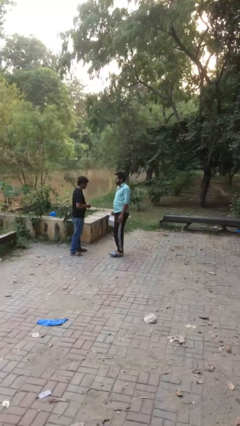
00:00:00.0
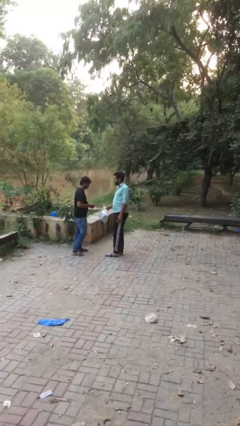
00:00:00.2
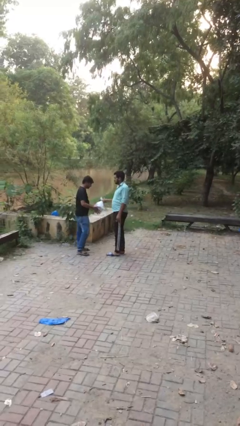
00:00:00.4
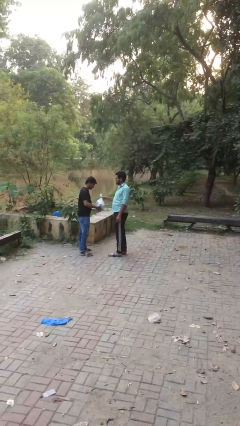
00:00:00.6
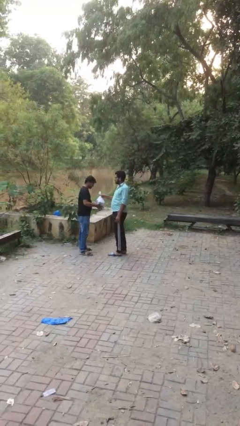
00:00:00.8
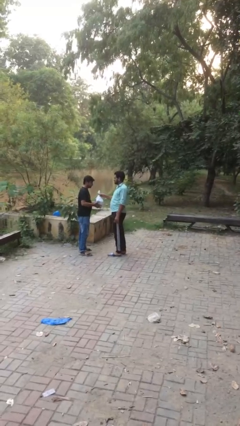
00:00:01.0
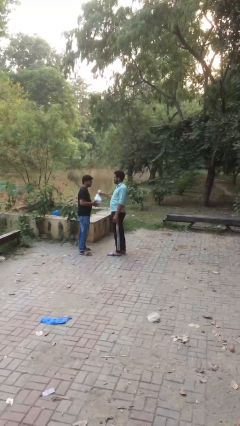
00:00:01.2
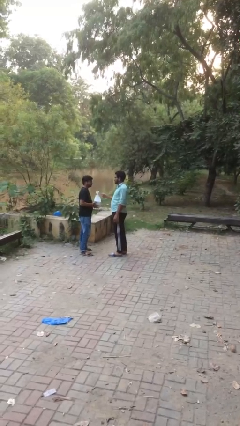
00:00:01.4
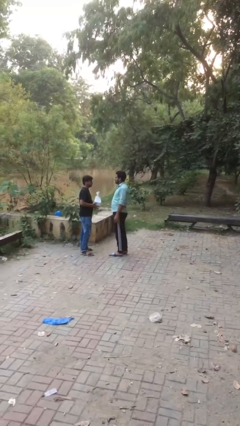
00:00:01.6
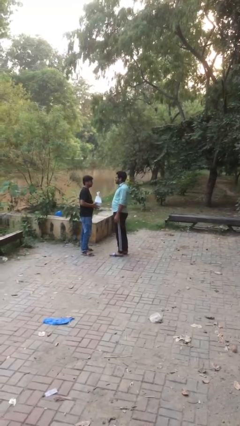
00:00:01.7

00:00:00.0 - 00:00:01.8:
person transfers object to person

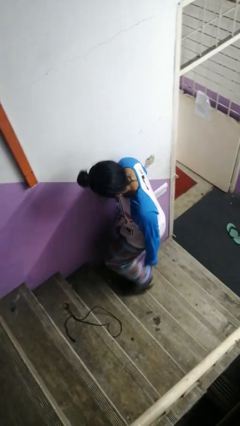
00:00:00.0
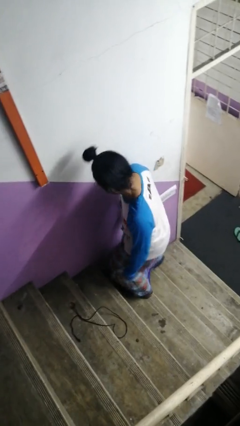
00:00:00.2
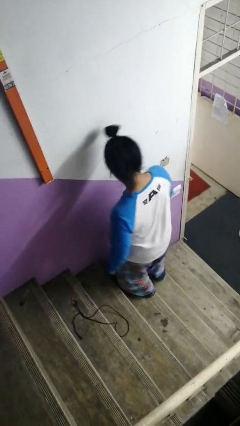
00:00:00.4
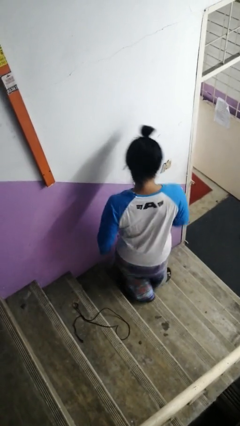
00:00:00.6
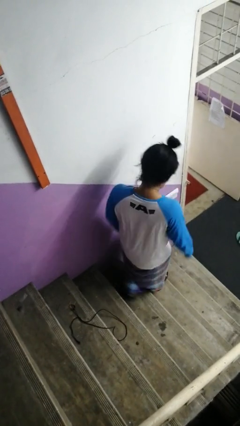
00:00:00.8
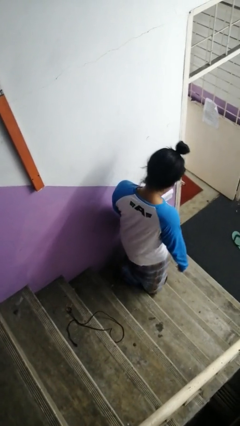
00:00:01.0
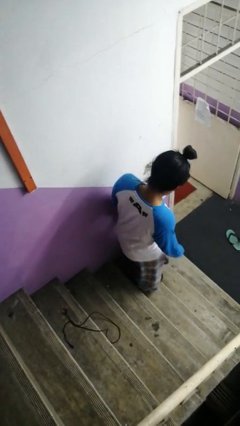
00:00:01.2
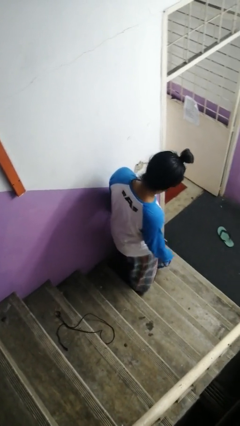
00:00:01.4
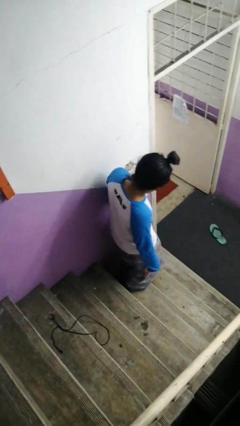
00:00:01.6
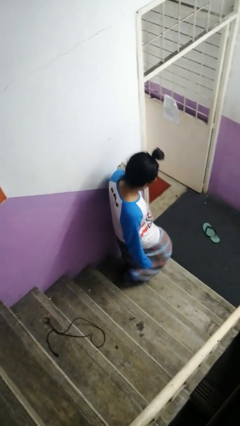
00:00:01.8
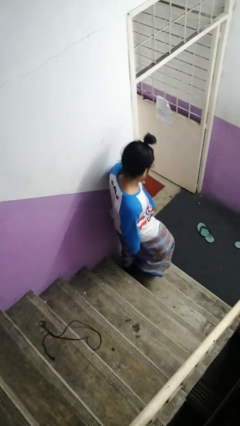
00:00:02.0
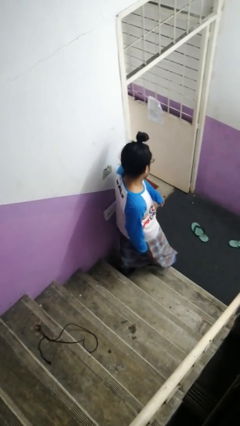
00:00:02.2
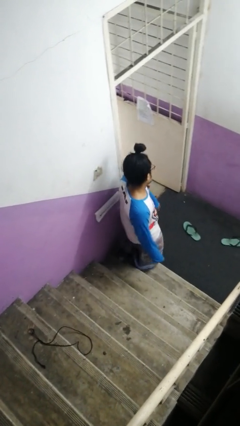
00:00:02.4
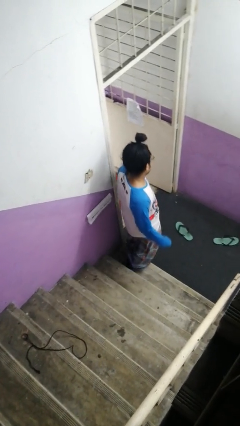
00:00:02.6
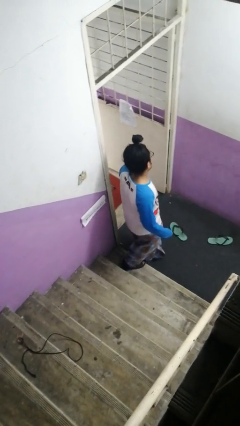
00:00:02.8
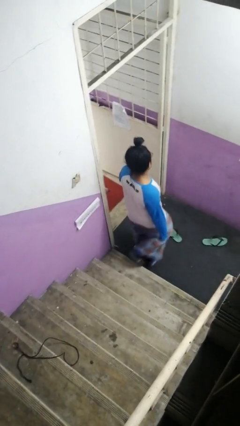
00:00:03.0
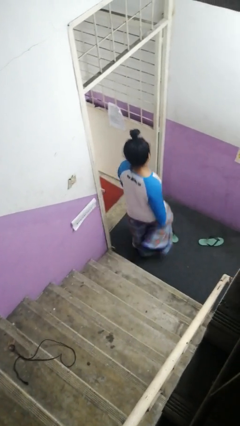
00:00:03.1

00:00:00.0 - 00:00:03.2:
person climbs down stairs

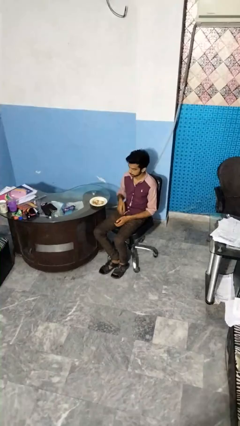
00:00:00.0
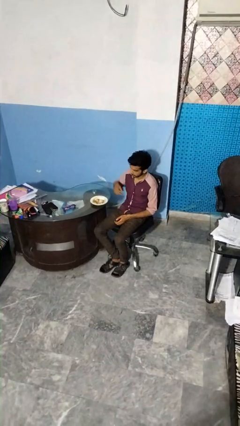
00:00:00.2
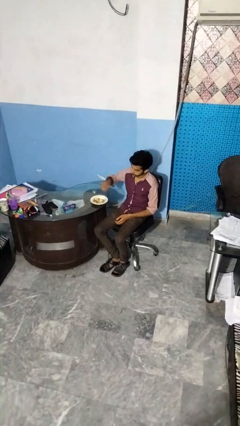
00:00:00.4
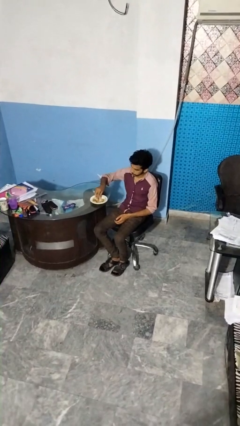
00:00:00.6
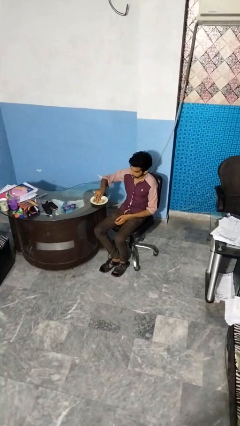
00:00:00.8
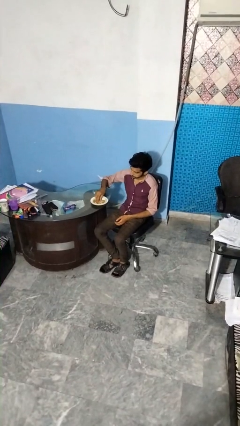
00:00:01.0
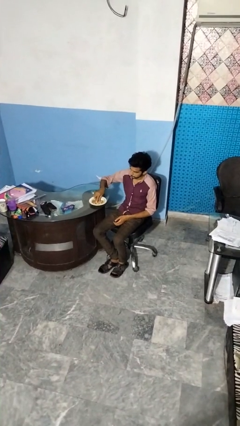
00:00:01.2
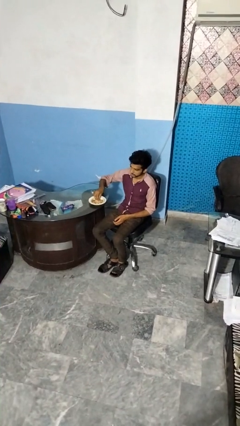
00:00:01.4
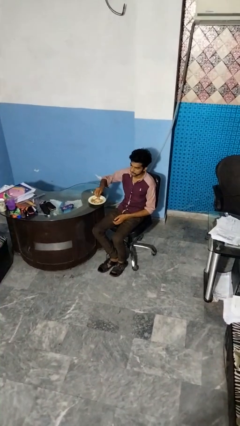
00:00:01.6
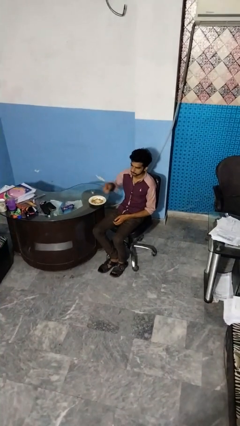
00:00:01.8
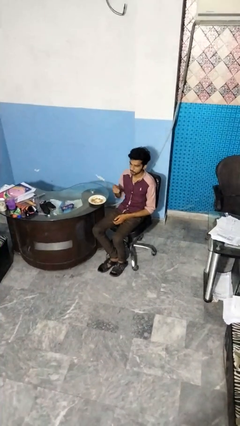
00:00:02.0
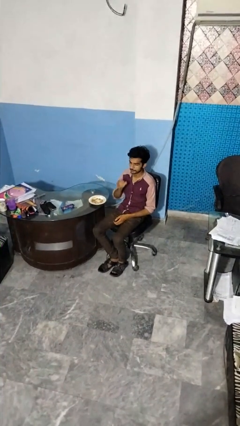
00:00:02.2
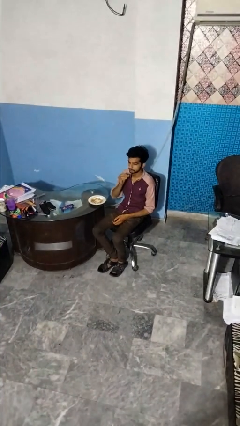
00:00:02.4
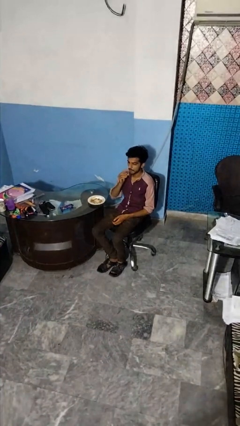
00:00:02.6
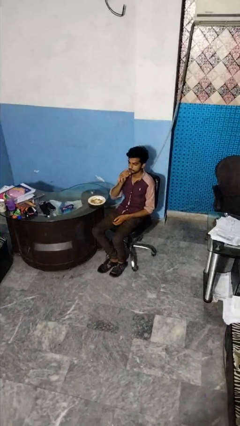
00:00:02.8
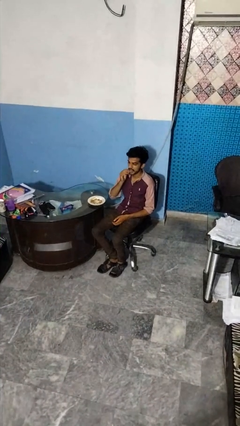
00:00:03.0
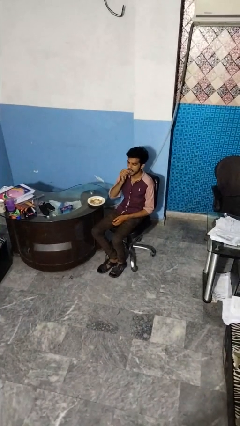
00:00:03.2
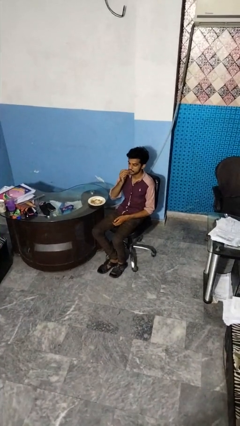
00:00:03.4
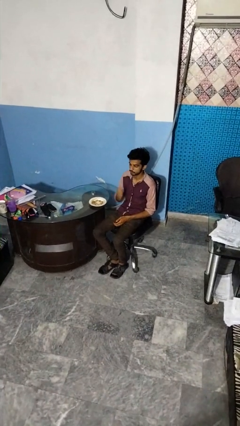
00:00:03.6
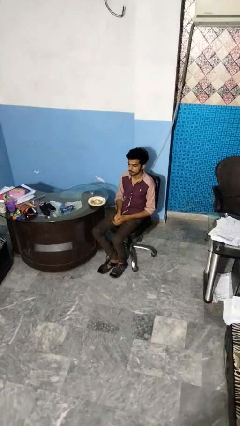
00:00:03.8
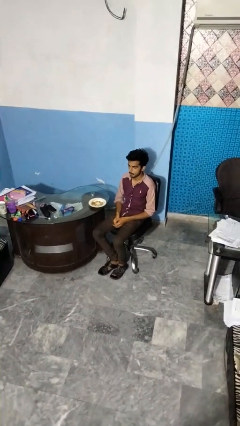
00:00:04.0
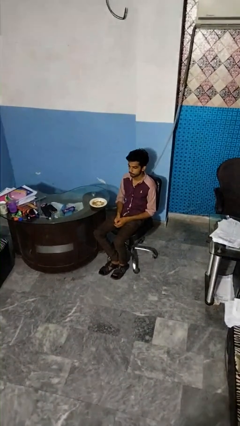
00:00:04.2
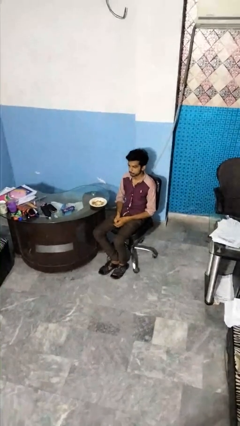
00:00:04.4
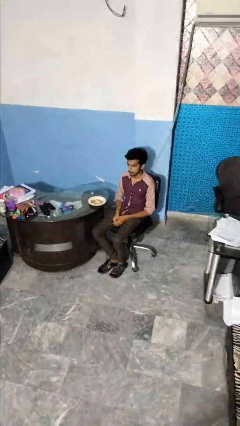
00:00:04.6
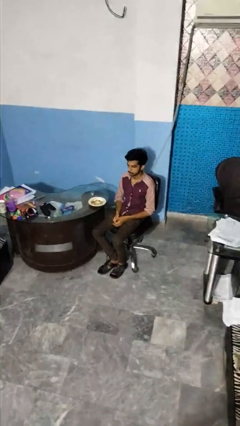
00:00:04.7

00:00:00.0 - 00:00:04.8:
person eats with hands

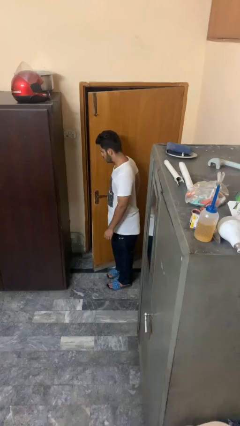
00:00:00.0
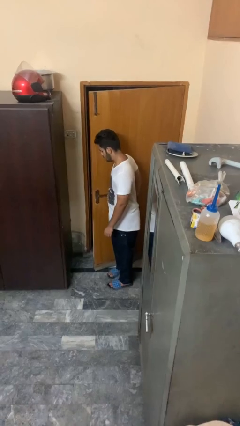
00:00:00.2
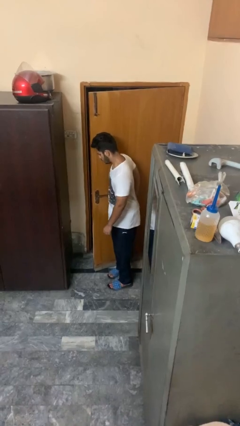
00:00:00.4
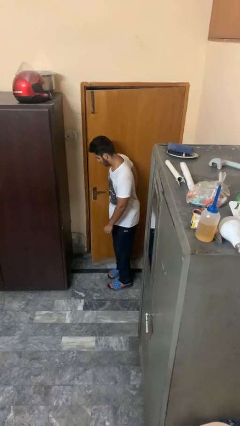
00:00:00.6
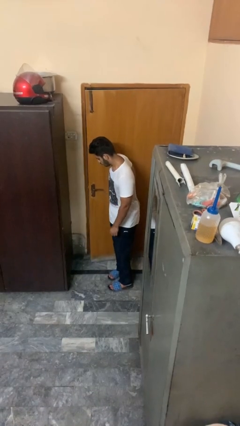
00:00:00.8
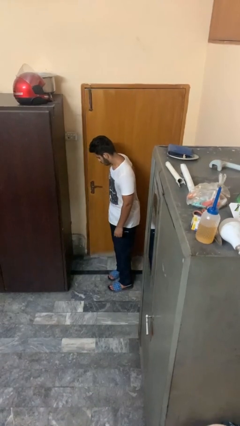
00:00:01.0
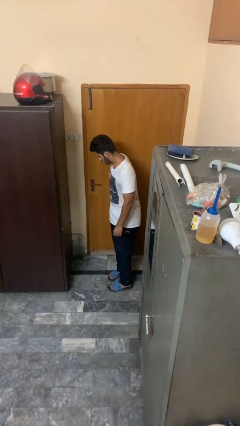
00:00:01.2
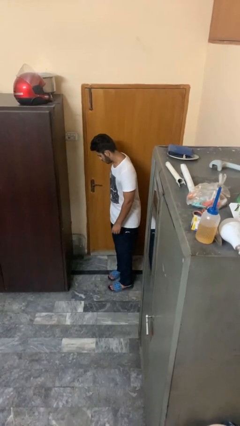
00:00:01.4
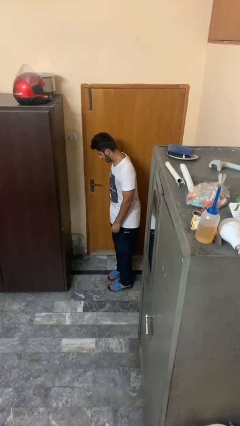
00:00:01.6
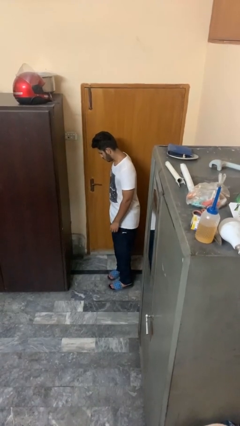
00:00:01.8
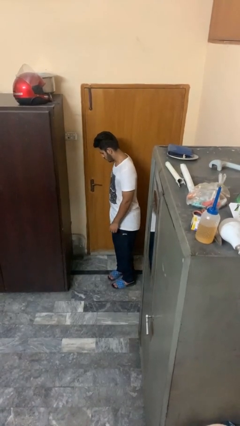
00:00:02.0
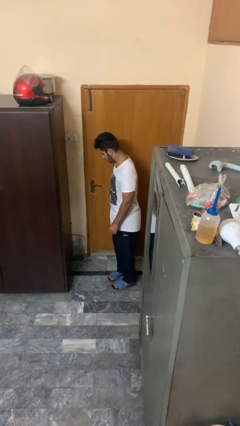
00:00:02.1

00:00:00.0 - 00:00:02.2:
person closes door with hip

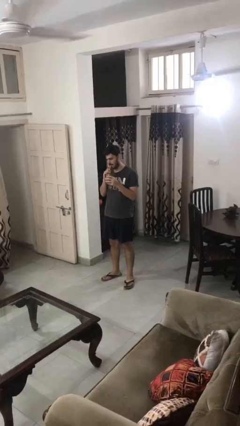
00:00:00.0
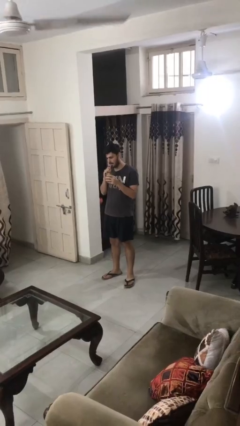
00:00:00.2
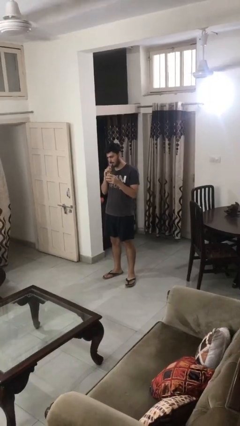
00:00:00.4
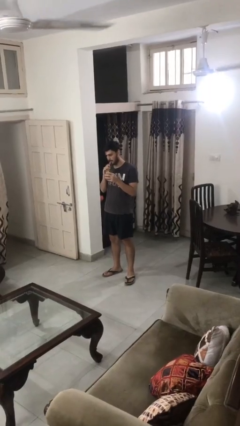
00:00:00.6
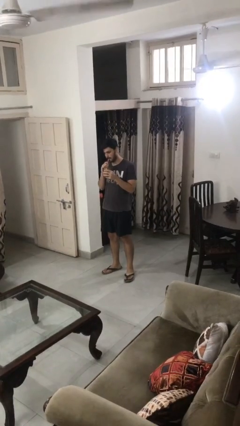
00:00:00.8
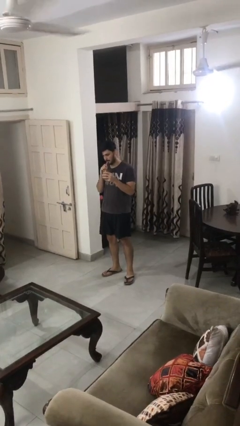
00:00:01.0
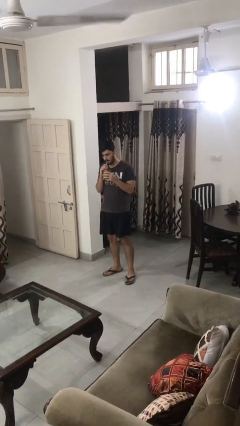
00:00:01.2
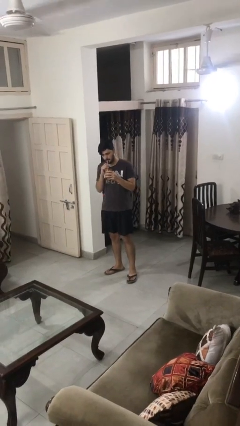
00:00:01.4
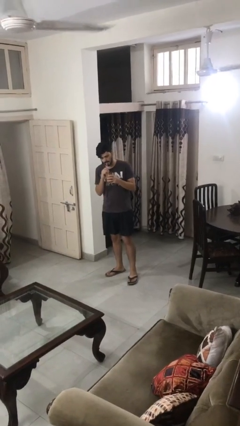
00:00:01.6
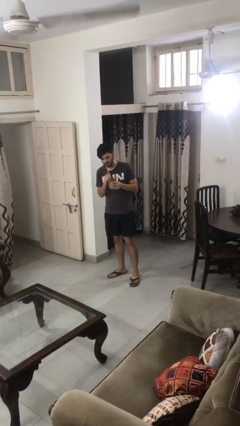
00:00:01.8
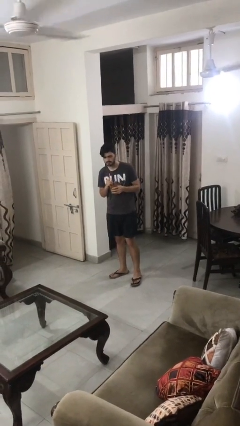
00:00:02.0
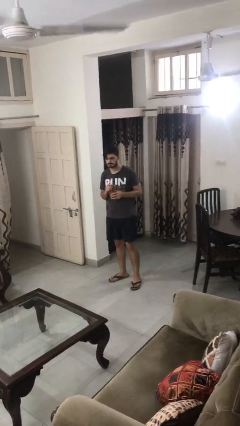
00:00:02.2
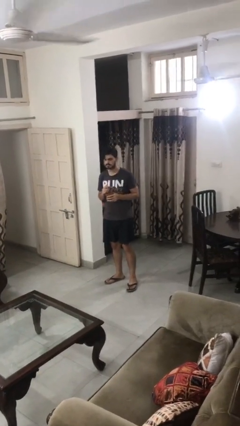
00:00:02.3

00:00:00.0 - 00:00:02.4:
person drinks from straw

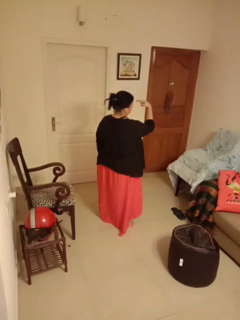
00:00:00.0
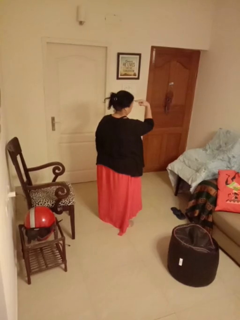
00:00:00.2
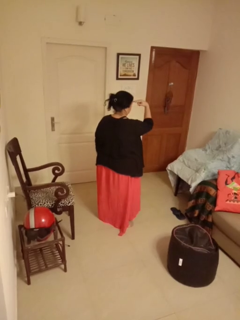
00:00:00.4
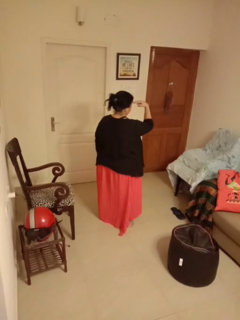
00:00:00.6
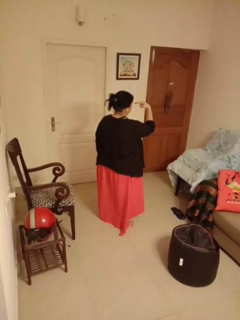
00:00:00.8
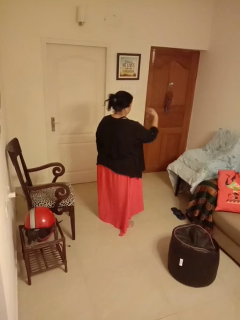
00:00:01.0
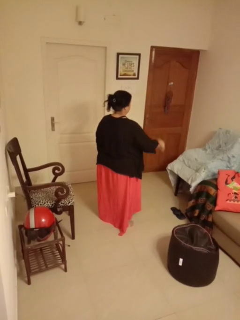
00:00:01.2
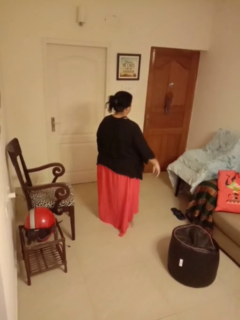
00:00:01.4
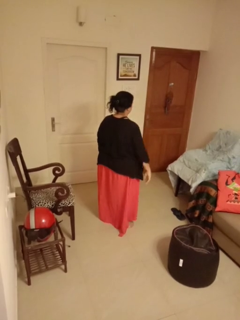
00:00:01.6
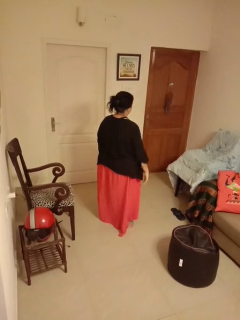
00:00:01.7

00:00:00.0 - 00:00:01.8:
person gestures watch closely

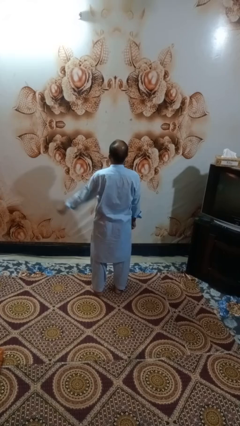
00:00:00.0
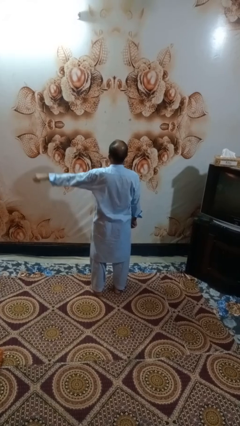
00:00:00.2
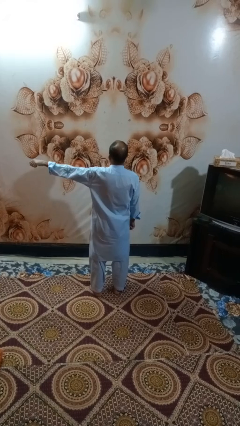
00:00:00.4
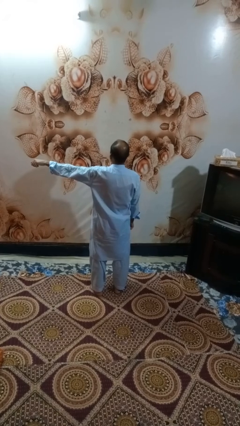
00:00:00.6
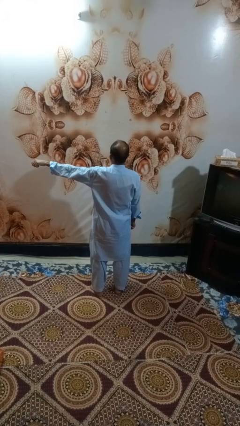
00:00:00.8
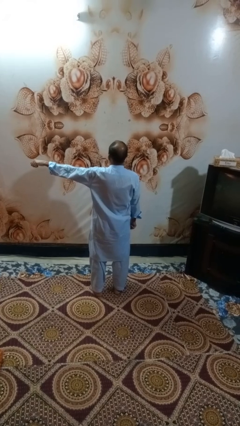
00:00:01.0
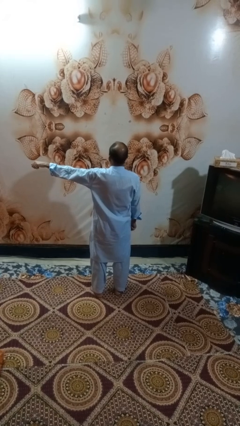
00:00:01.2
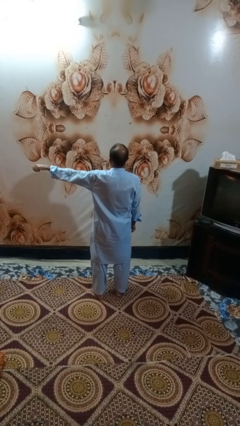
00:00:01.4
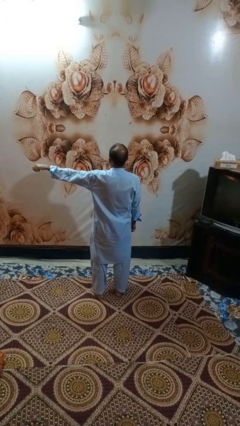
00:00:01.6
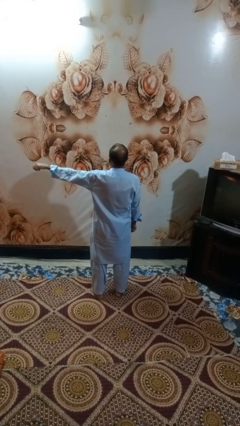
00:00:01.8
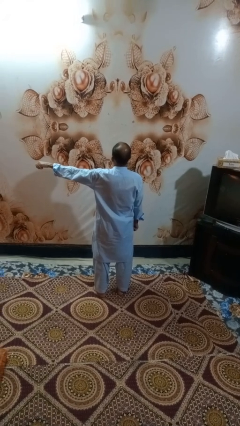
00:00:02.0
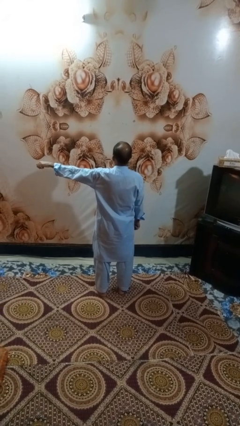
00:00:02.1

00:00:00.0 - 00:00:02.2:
person gestures swipe left
